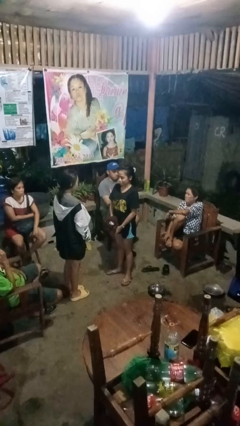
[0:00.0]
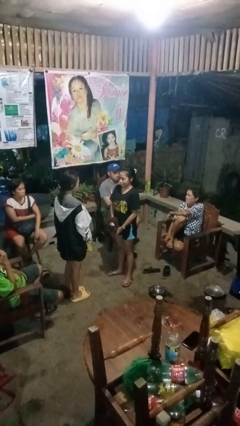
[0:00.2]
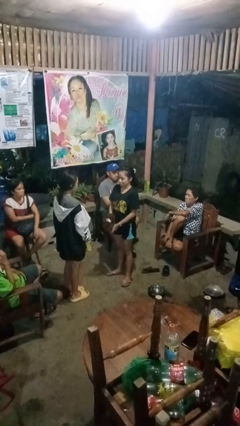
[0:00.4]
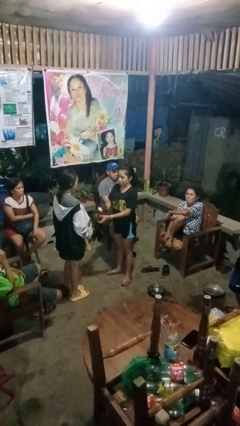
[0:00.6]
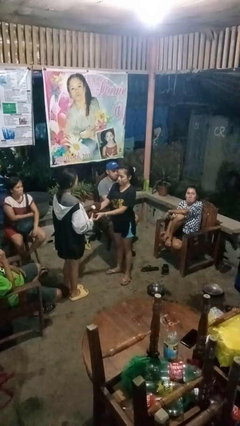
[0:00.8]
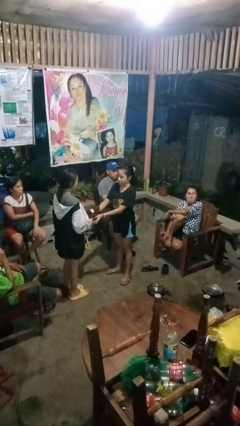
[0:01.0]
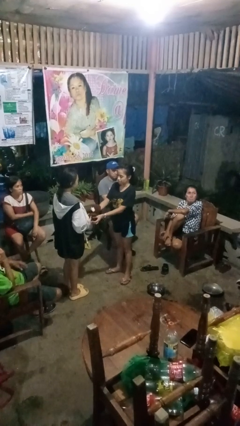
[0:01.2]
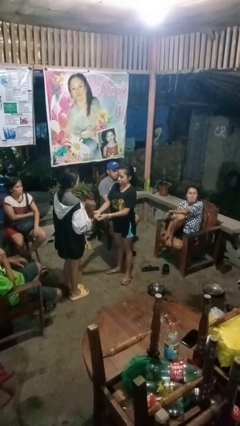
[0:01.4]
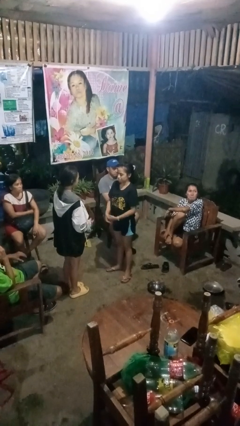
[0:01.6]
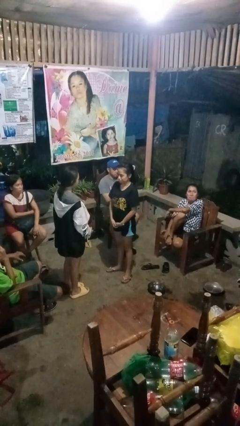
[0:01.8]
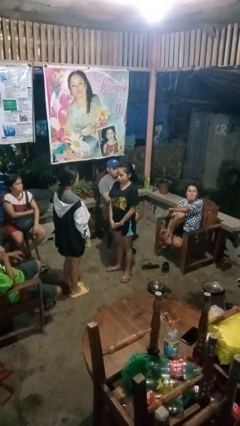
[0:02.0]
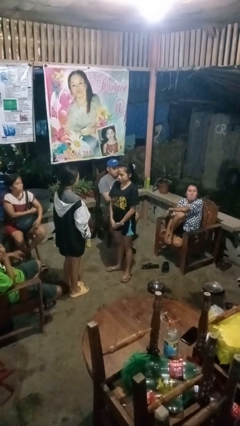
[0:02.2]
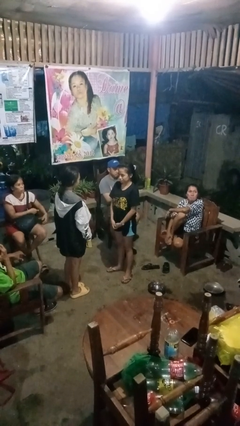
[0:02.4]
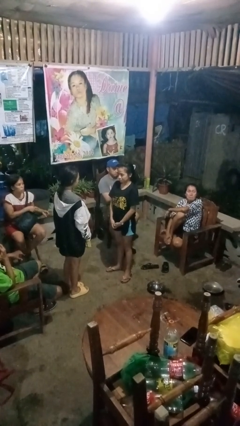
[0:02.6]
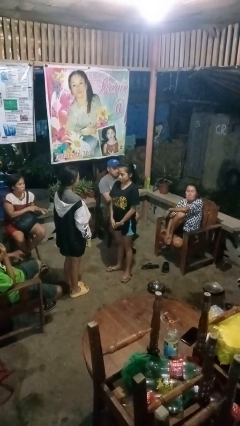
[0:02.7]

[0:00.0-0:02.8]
person transfers object to person

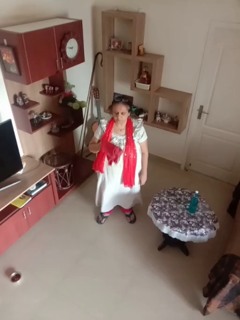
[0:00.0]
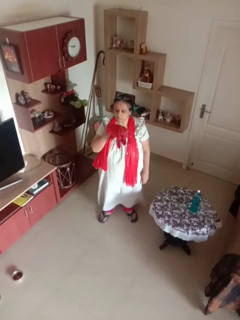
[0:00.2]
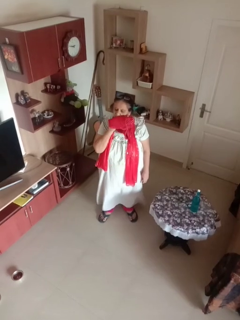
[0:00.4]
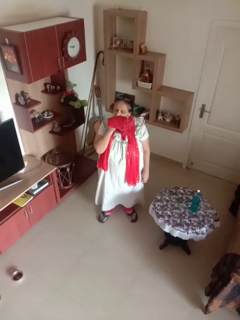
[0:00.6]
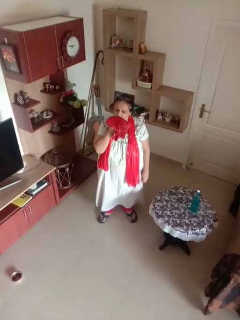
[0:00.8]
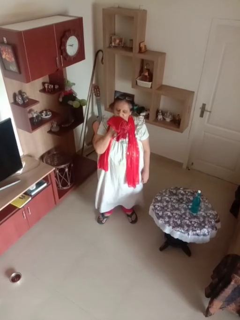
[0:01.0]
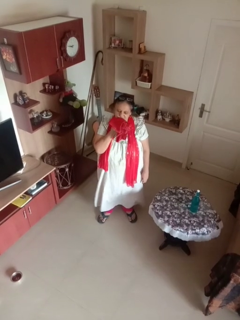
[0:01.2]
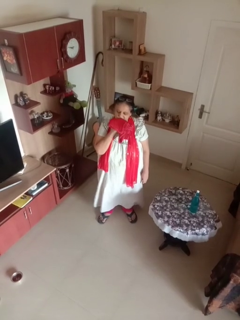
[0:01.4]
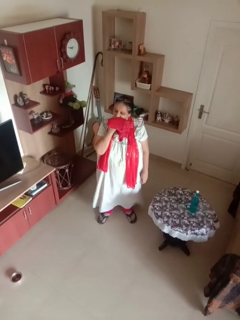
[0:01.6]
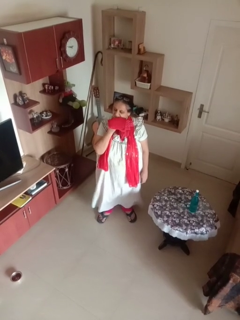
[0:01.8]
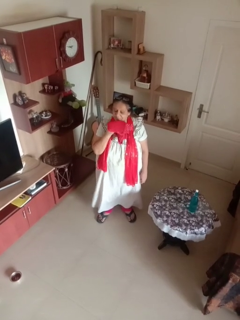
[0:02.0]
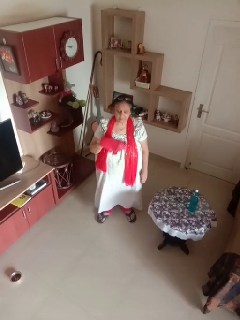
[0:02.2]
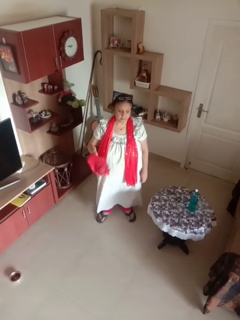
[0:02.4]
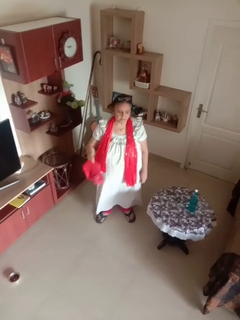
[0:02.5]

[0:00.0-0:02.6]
person wipes mouth with napkin

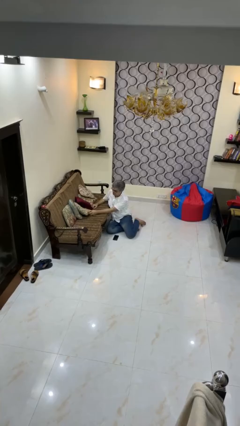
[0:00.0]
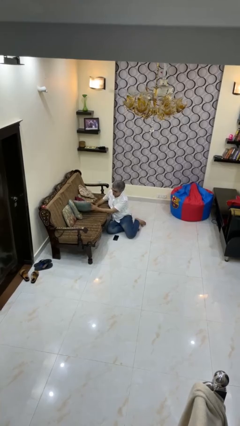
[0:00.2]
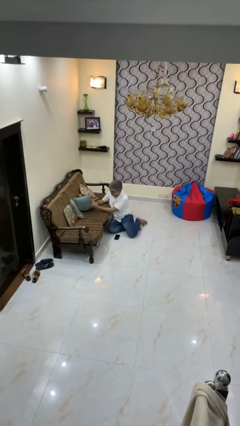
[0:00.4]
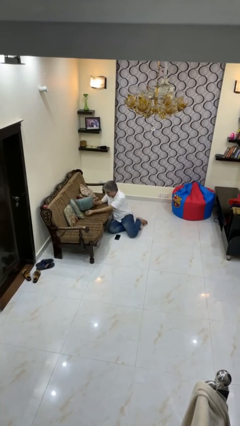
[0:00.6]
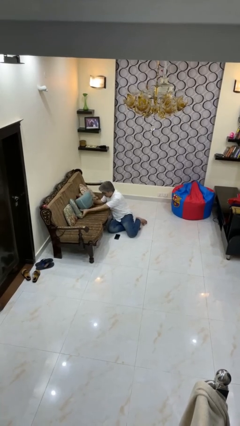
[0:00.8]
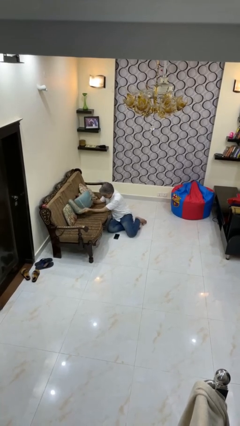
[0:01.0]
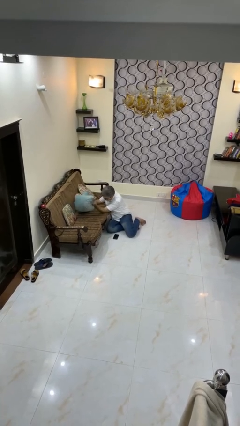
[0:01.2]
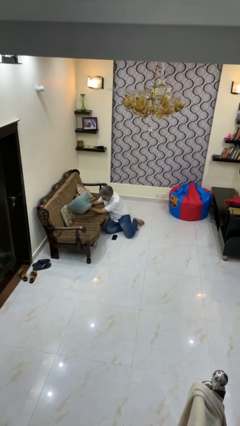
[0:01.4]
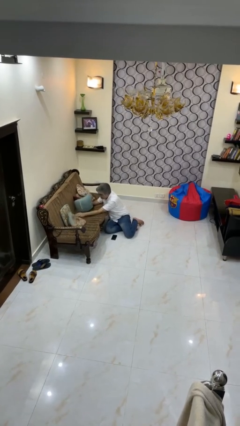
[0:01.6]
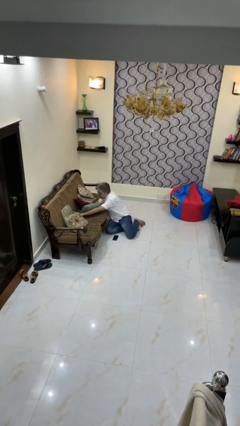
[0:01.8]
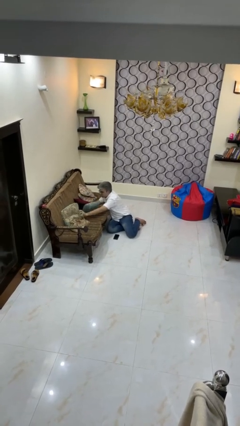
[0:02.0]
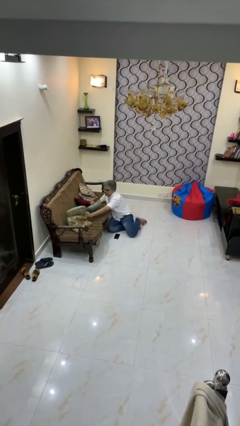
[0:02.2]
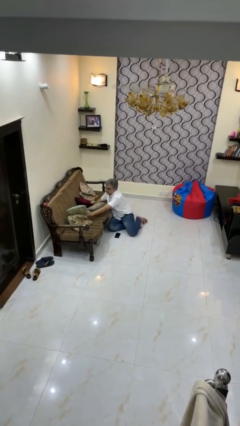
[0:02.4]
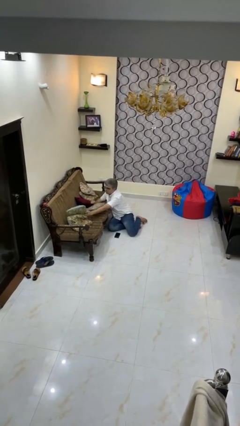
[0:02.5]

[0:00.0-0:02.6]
person searches in couch

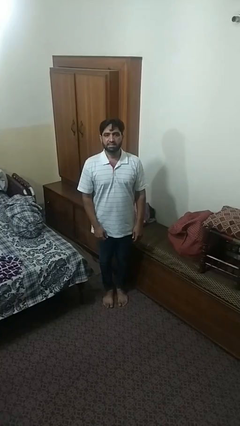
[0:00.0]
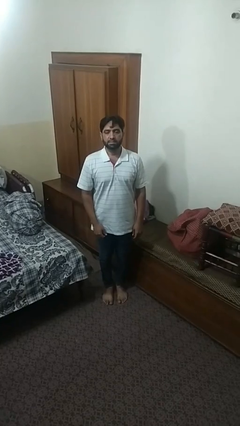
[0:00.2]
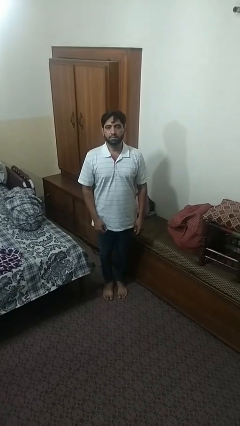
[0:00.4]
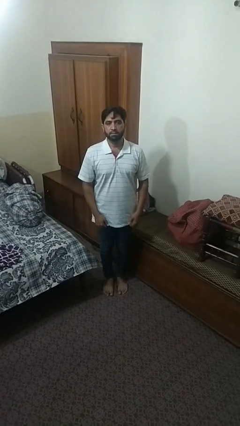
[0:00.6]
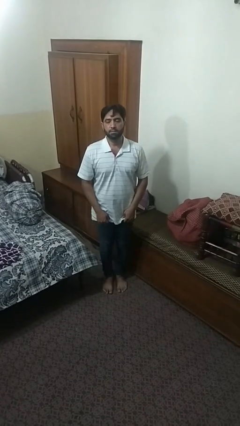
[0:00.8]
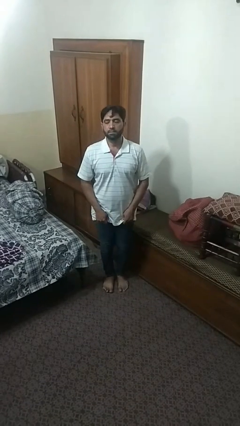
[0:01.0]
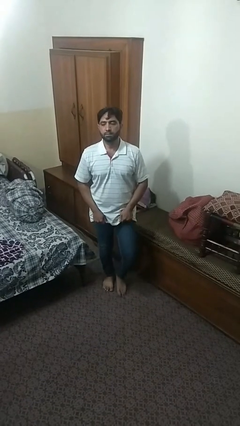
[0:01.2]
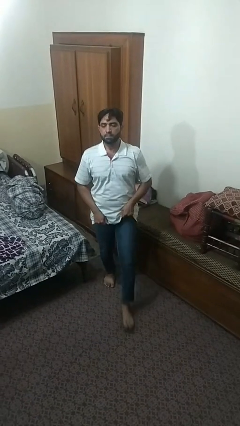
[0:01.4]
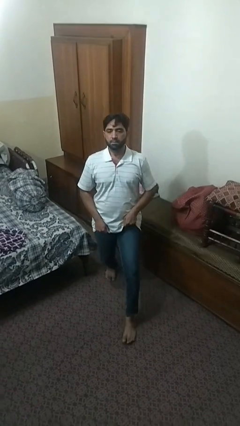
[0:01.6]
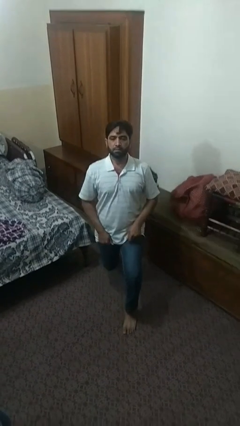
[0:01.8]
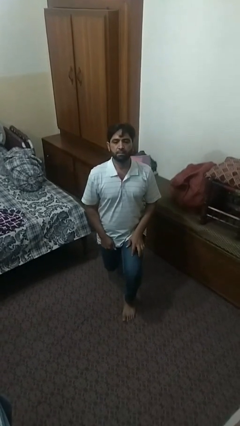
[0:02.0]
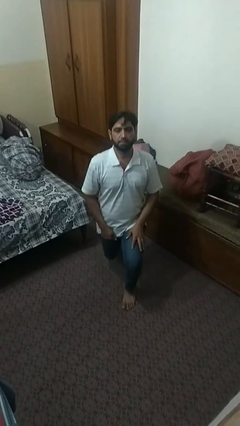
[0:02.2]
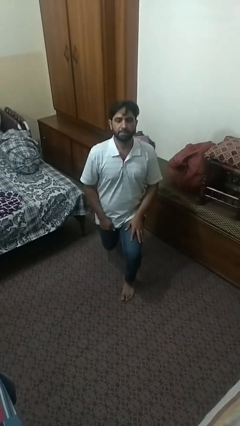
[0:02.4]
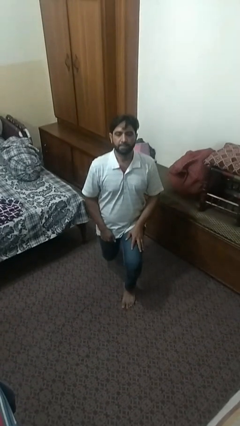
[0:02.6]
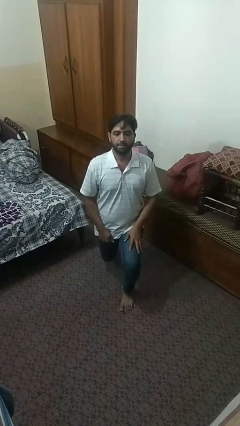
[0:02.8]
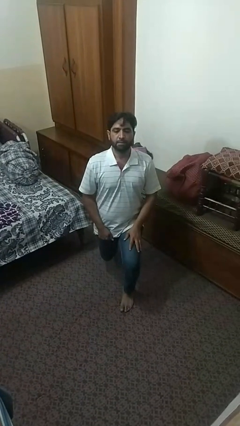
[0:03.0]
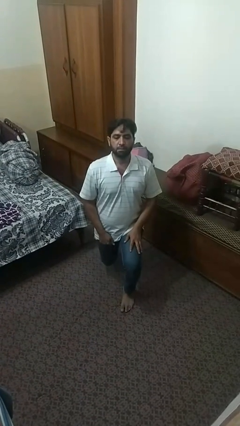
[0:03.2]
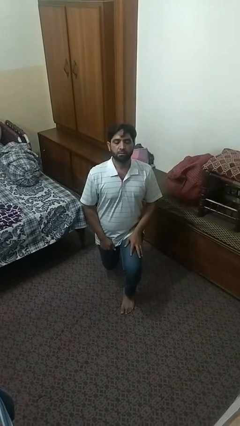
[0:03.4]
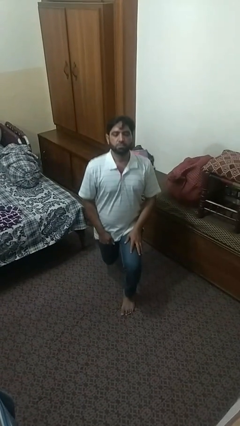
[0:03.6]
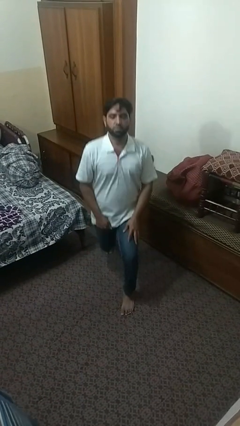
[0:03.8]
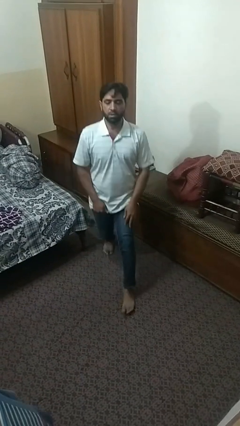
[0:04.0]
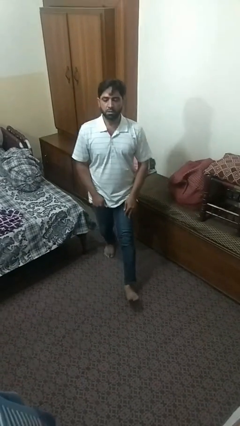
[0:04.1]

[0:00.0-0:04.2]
person exercises with lunges

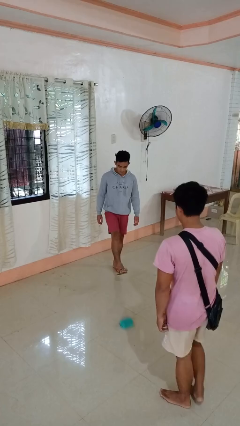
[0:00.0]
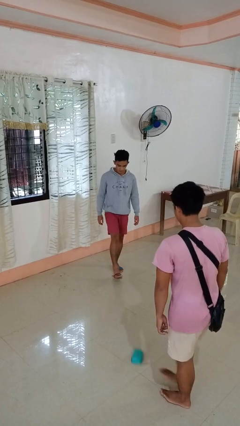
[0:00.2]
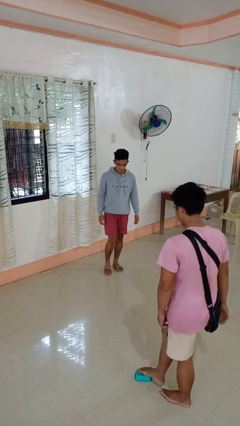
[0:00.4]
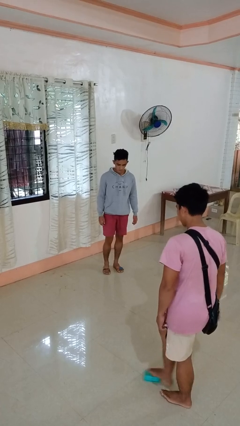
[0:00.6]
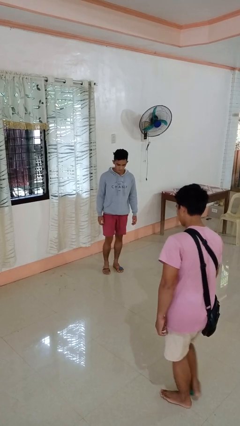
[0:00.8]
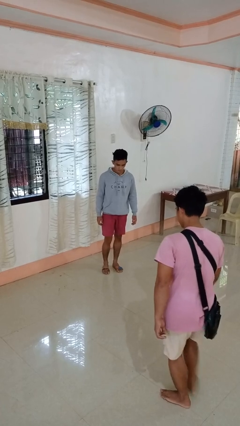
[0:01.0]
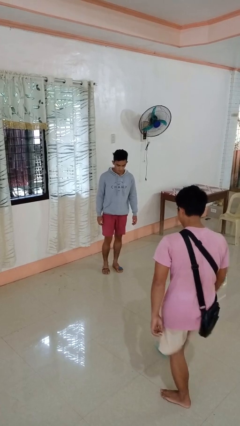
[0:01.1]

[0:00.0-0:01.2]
person kicks object to person

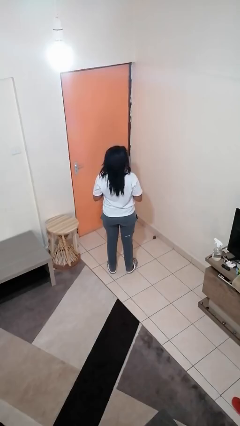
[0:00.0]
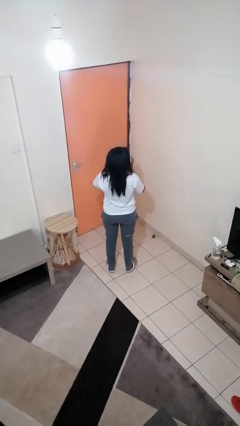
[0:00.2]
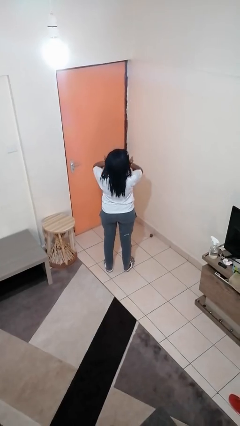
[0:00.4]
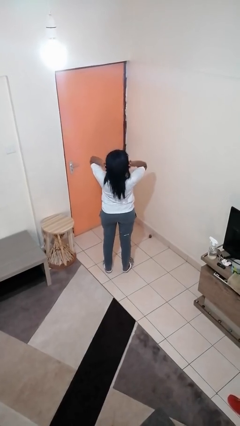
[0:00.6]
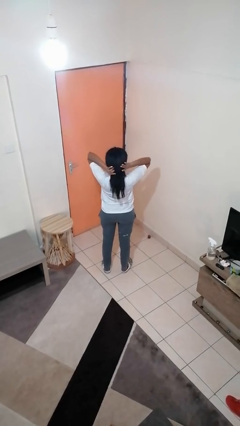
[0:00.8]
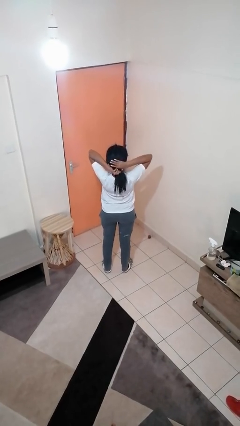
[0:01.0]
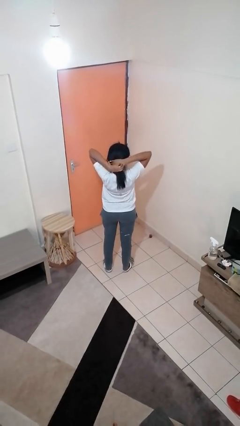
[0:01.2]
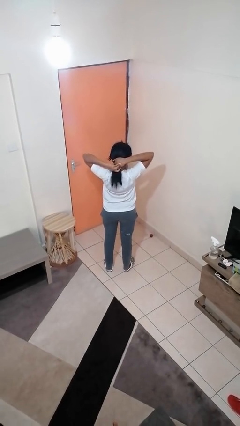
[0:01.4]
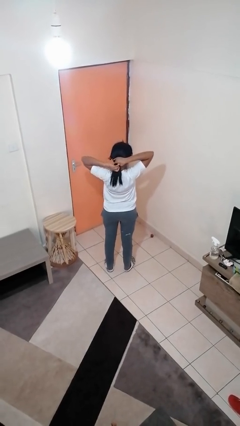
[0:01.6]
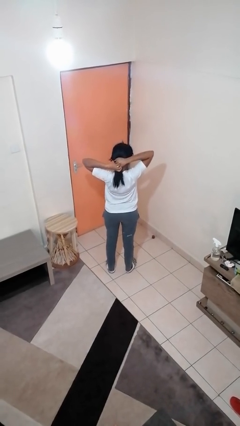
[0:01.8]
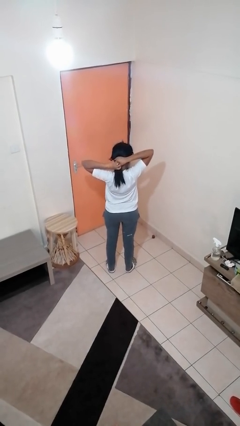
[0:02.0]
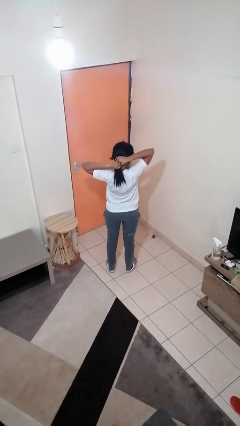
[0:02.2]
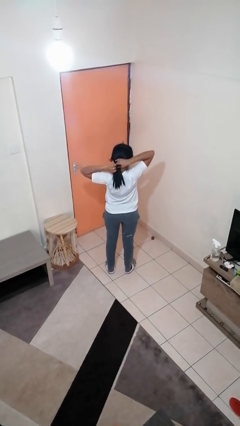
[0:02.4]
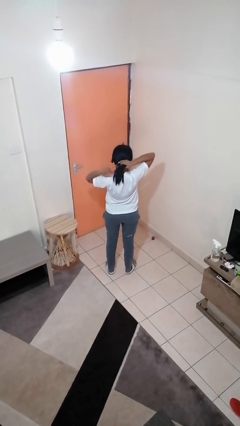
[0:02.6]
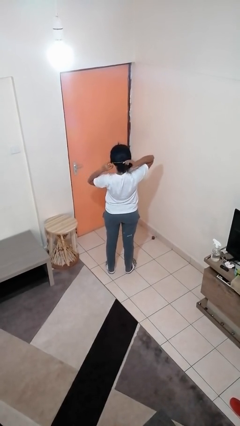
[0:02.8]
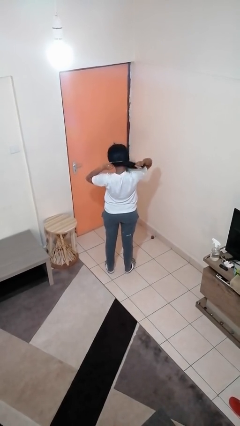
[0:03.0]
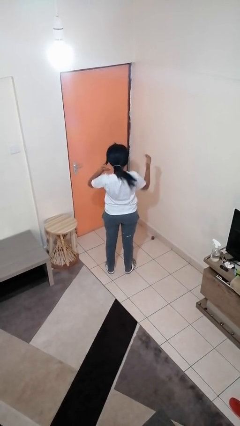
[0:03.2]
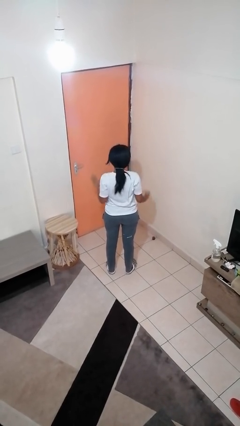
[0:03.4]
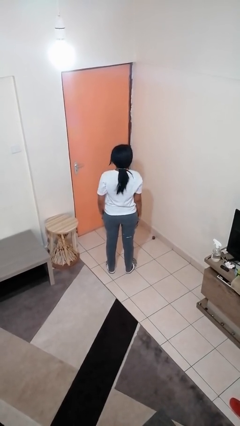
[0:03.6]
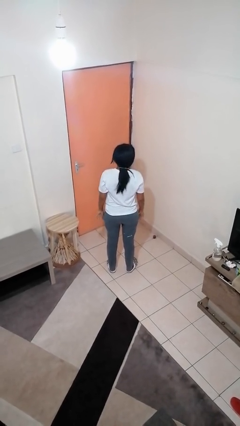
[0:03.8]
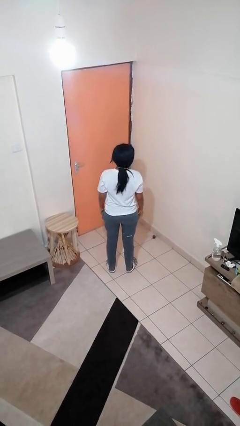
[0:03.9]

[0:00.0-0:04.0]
person puts hair in ponytail

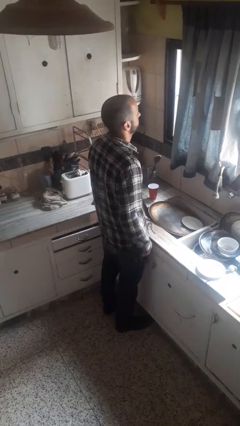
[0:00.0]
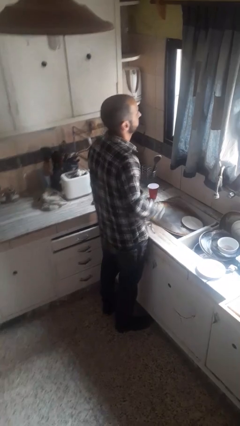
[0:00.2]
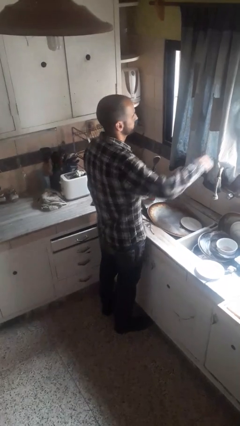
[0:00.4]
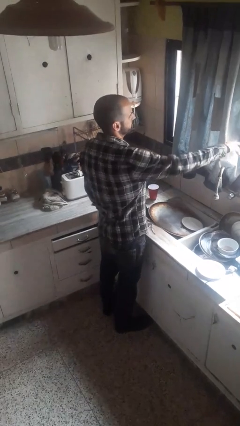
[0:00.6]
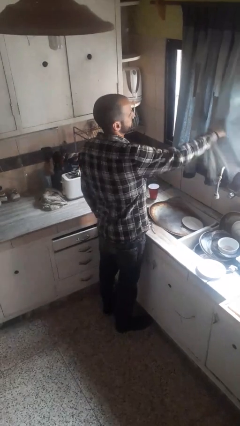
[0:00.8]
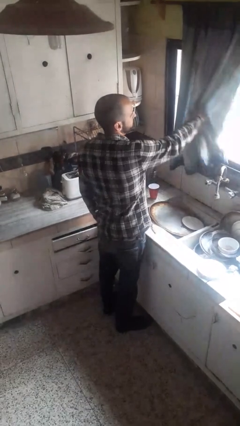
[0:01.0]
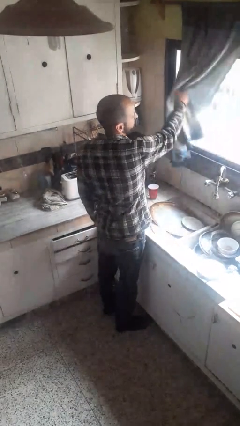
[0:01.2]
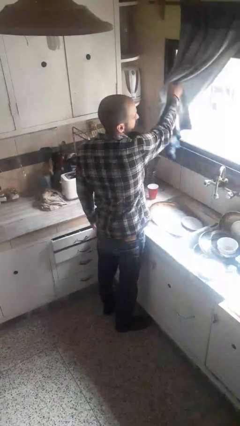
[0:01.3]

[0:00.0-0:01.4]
person opens curtains
